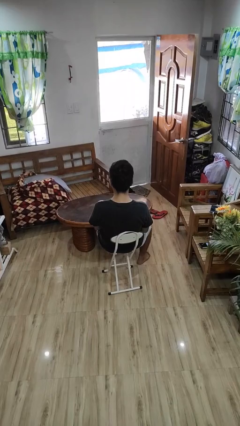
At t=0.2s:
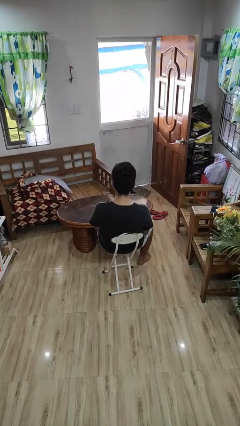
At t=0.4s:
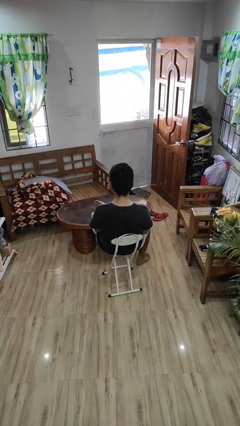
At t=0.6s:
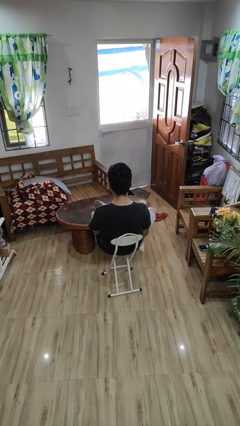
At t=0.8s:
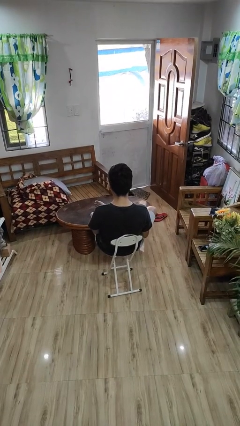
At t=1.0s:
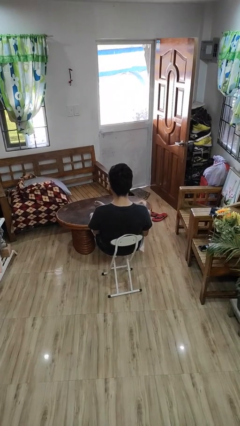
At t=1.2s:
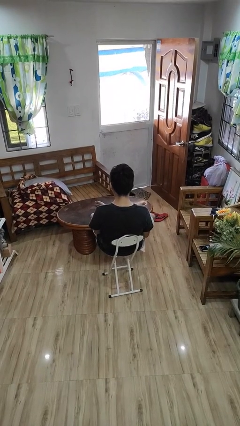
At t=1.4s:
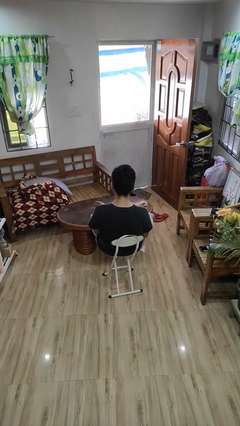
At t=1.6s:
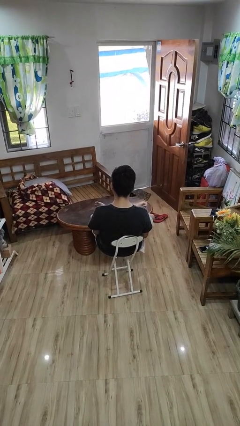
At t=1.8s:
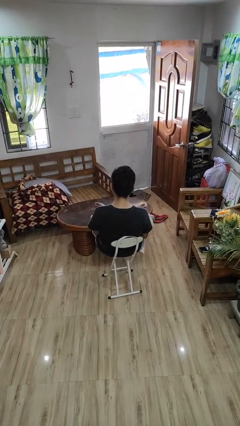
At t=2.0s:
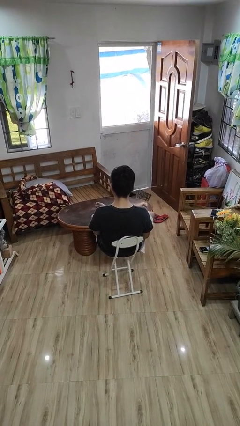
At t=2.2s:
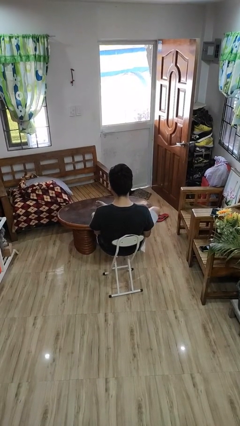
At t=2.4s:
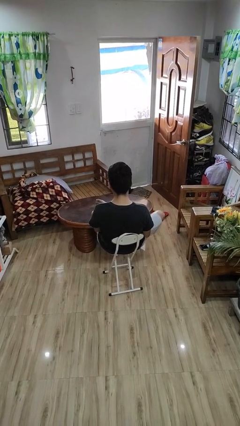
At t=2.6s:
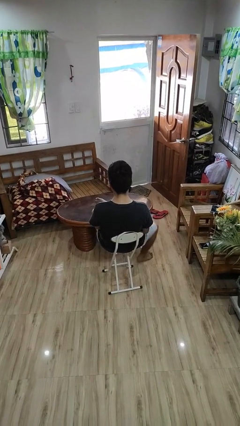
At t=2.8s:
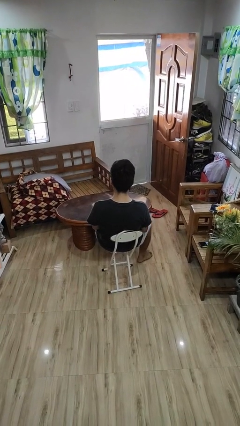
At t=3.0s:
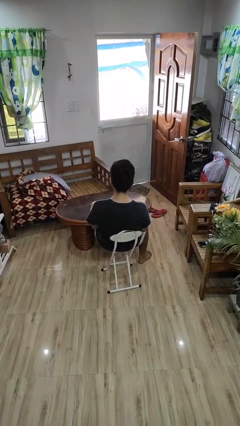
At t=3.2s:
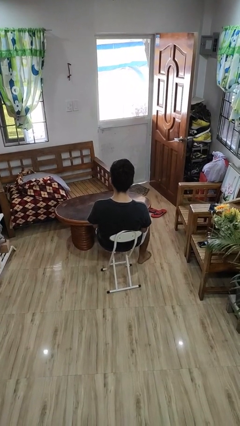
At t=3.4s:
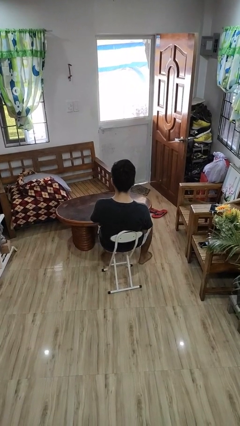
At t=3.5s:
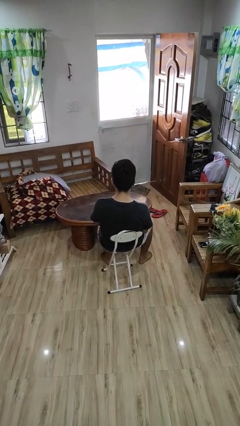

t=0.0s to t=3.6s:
person puts feet up

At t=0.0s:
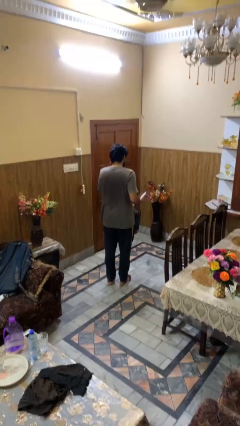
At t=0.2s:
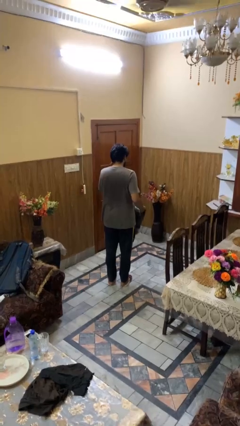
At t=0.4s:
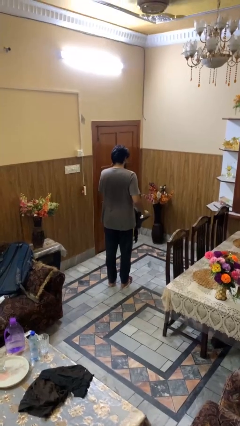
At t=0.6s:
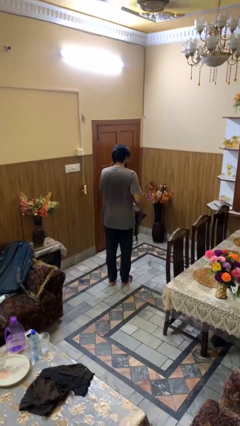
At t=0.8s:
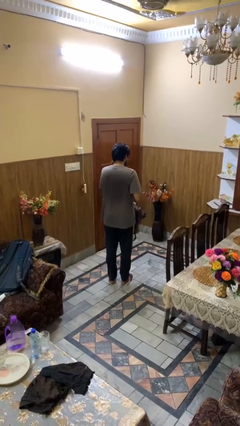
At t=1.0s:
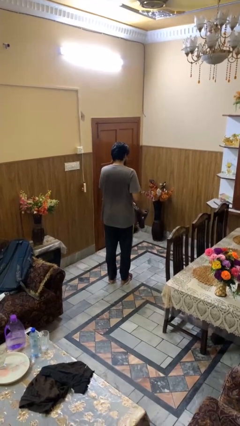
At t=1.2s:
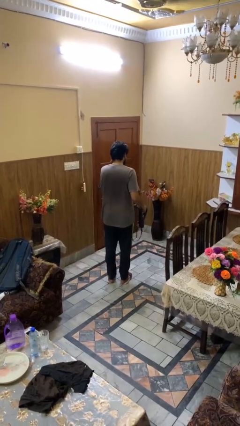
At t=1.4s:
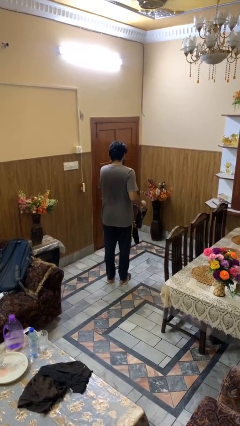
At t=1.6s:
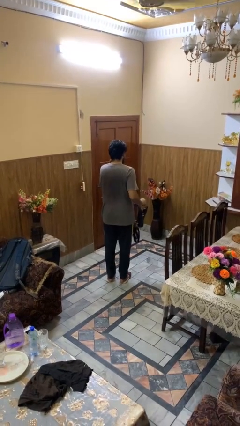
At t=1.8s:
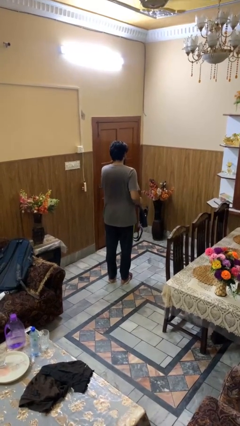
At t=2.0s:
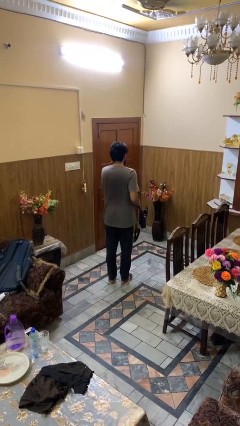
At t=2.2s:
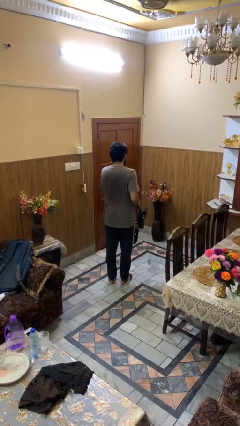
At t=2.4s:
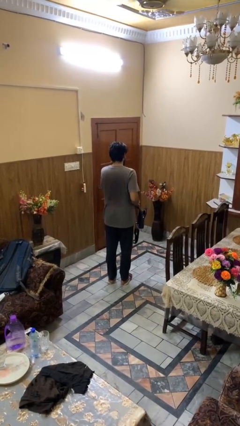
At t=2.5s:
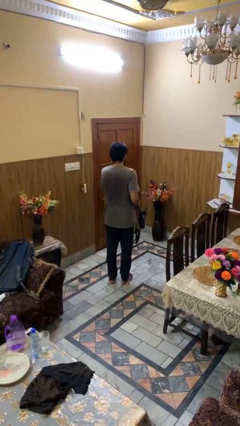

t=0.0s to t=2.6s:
person puts object into purse

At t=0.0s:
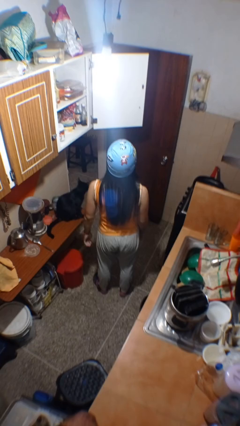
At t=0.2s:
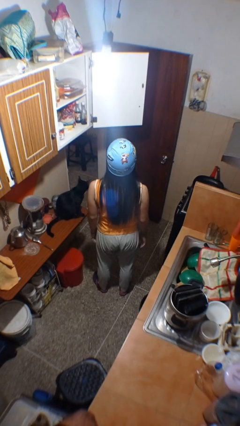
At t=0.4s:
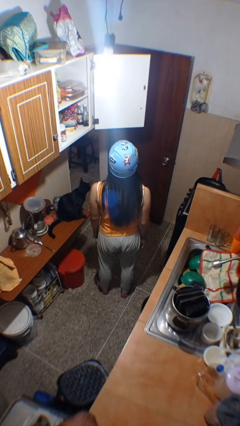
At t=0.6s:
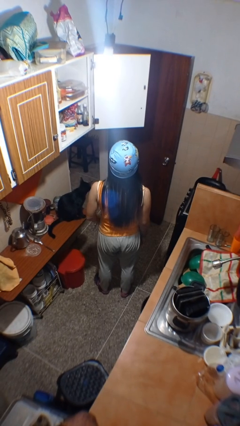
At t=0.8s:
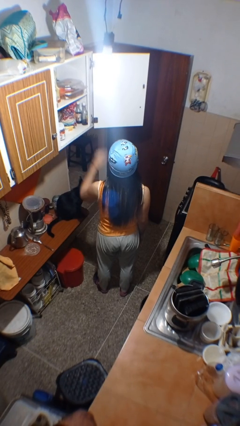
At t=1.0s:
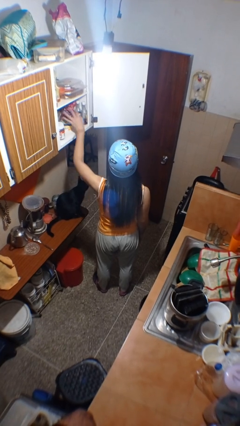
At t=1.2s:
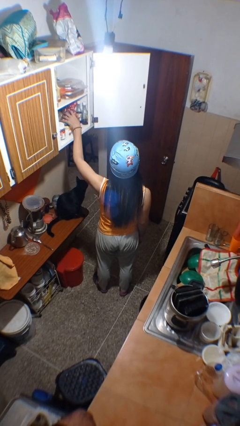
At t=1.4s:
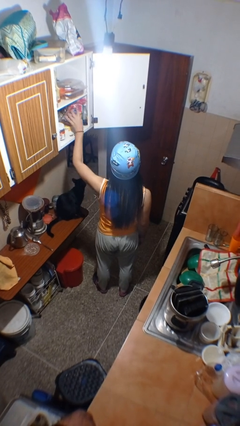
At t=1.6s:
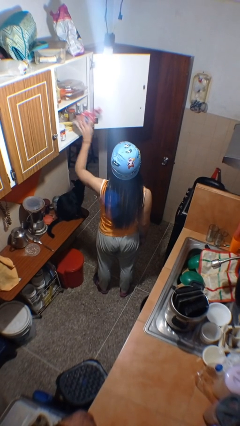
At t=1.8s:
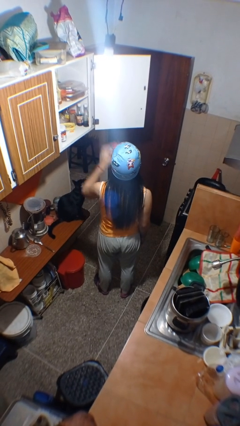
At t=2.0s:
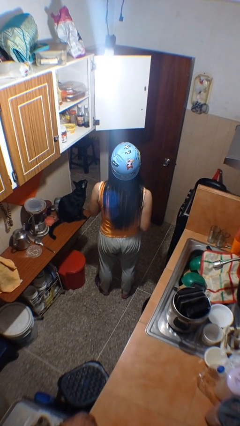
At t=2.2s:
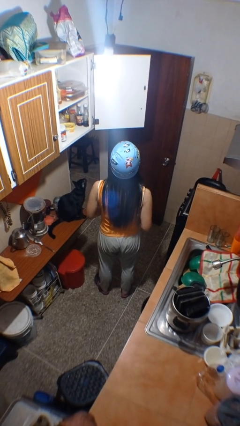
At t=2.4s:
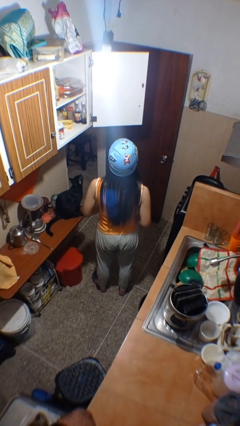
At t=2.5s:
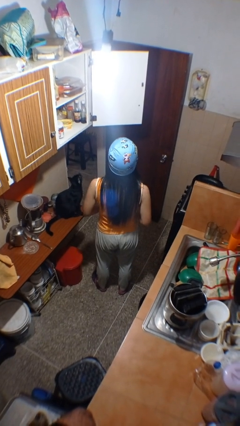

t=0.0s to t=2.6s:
person picks up object from cabinet

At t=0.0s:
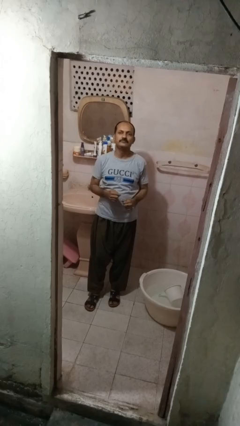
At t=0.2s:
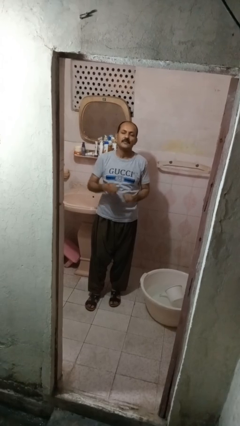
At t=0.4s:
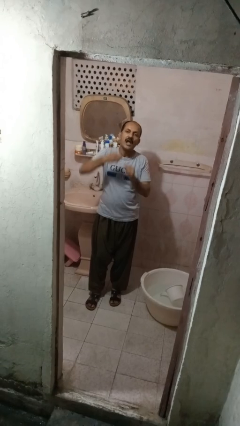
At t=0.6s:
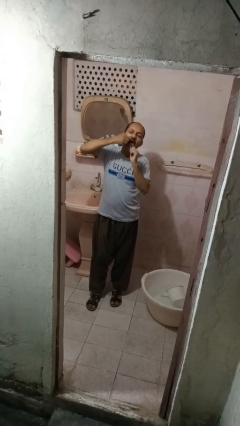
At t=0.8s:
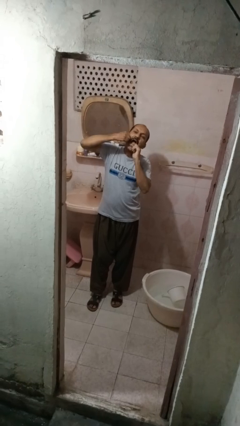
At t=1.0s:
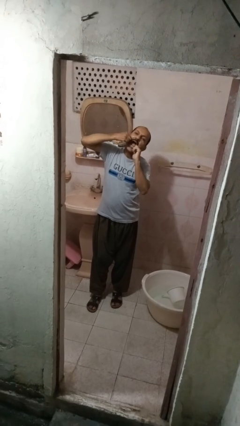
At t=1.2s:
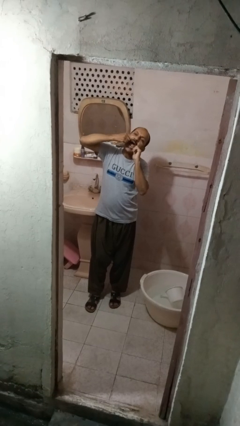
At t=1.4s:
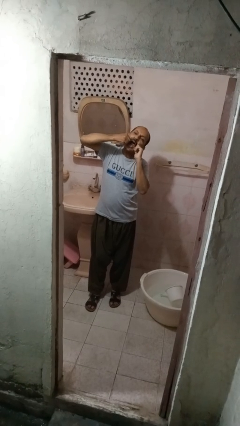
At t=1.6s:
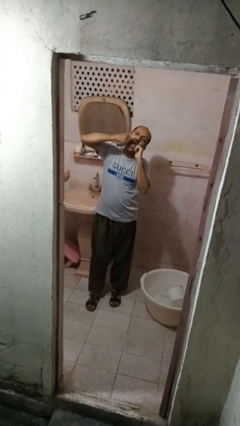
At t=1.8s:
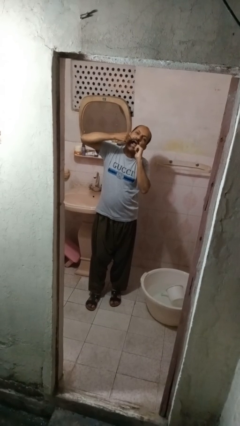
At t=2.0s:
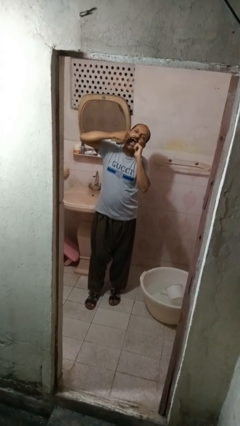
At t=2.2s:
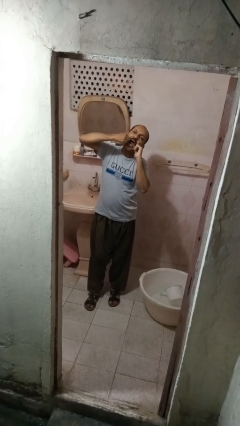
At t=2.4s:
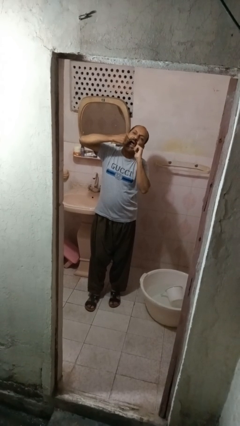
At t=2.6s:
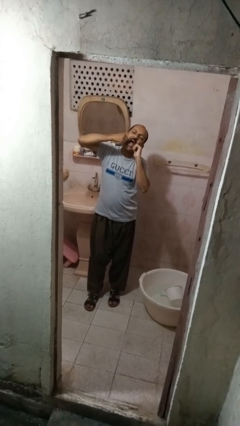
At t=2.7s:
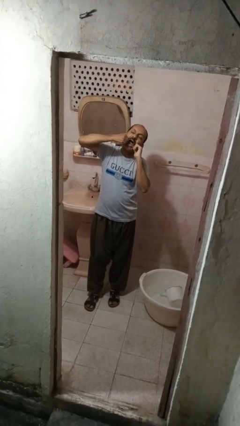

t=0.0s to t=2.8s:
person flosses

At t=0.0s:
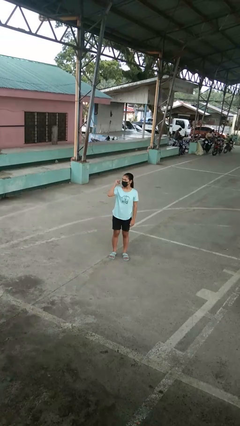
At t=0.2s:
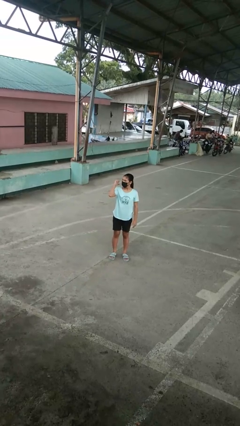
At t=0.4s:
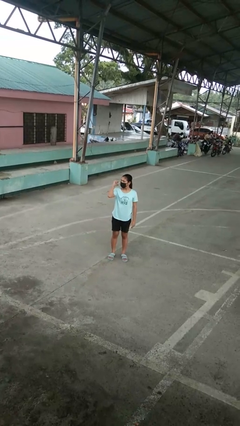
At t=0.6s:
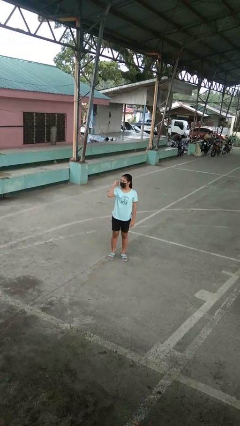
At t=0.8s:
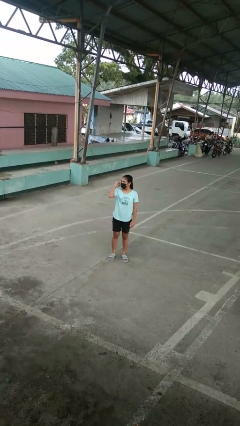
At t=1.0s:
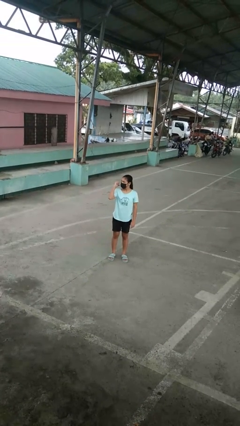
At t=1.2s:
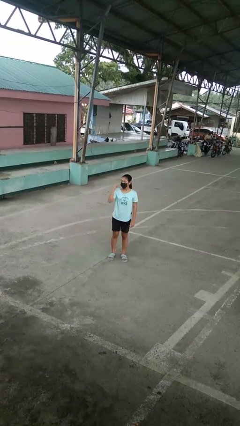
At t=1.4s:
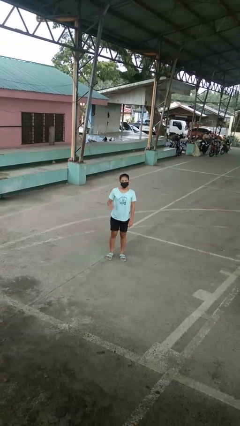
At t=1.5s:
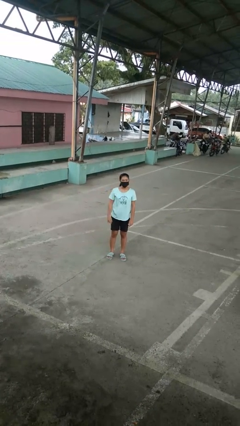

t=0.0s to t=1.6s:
person gestures behind me

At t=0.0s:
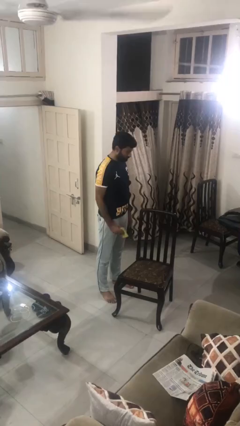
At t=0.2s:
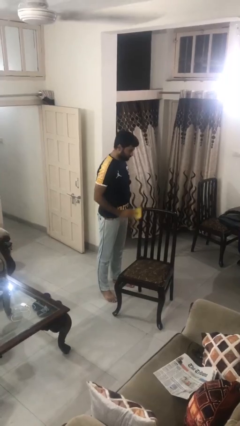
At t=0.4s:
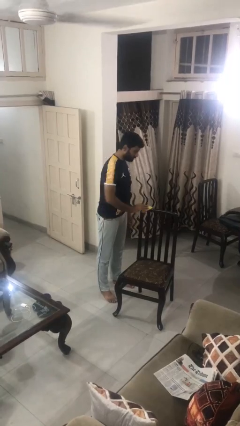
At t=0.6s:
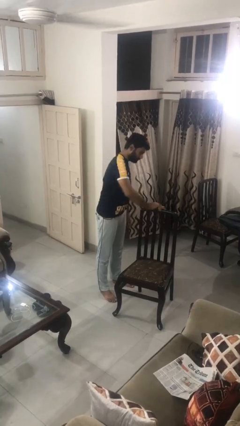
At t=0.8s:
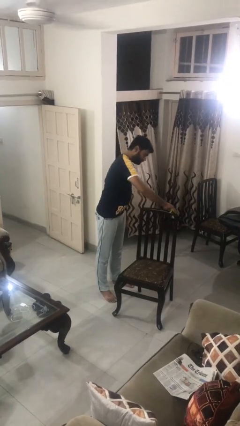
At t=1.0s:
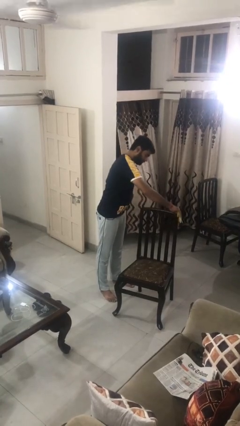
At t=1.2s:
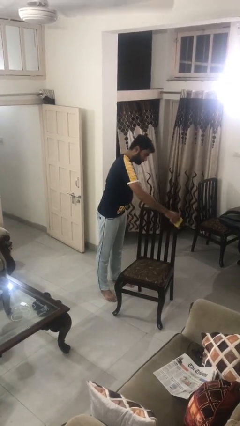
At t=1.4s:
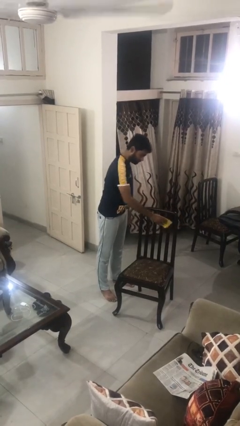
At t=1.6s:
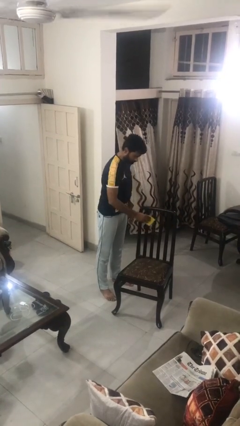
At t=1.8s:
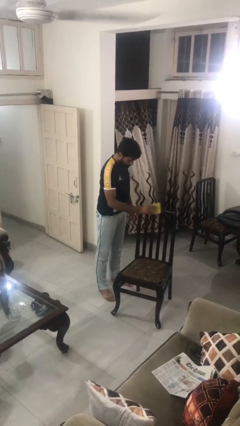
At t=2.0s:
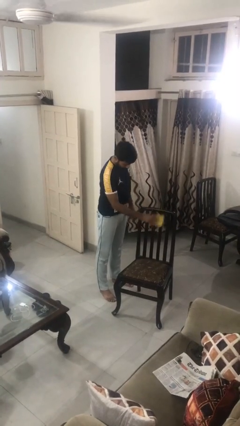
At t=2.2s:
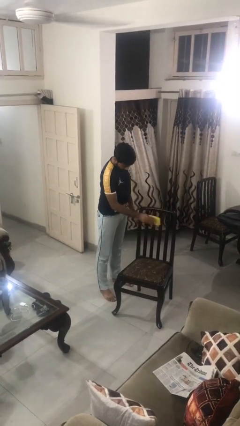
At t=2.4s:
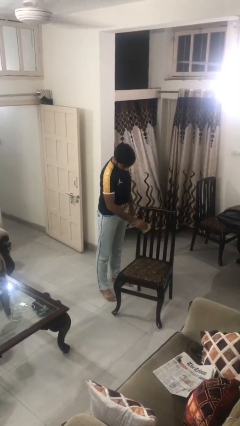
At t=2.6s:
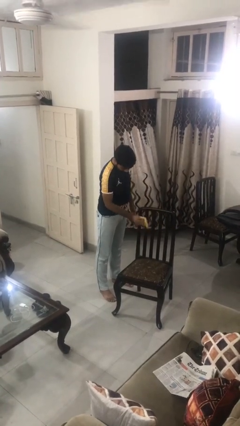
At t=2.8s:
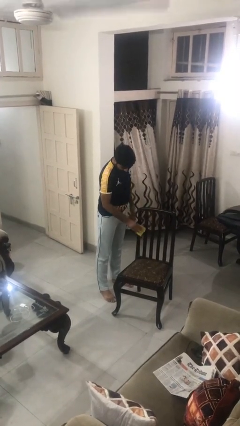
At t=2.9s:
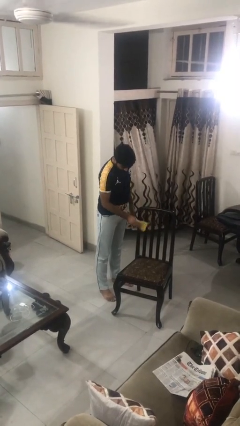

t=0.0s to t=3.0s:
person dusts furniture

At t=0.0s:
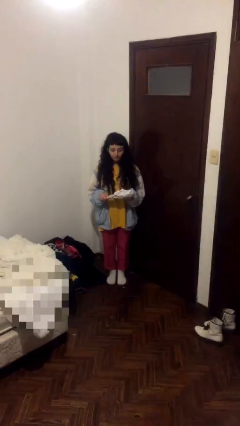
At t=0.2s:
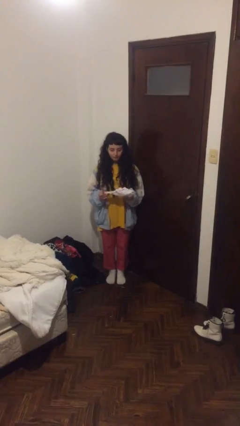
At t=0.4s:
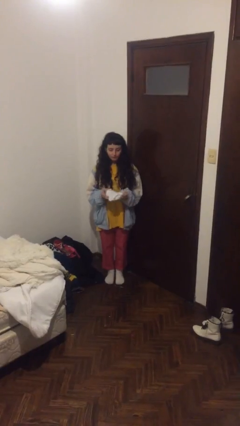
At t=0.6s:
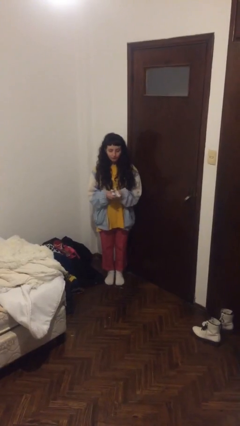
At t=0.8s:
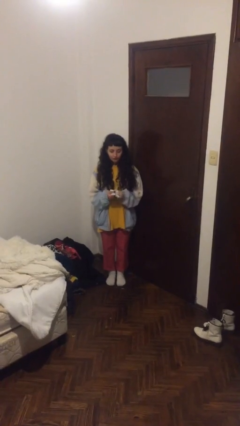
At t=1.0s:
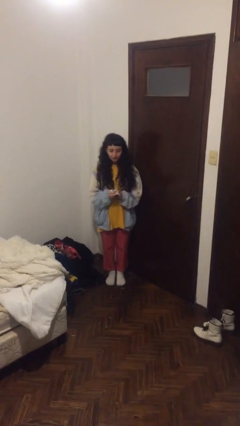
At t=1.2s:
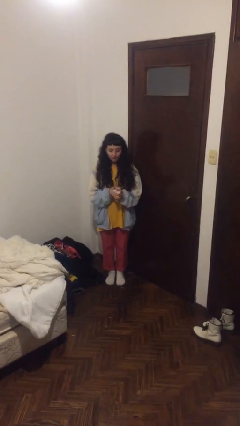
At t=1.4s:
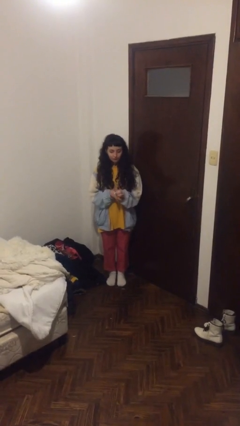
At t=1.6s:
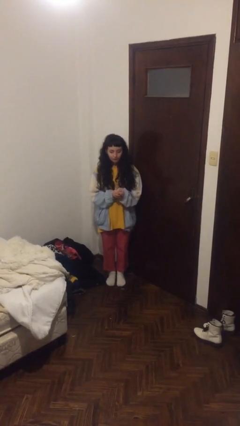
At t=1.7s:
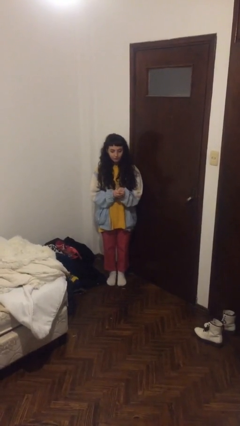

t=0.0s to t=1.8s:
person crumples paper
